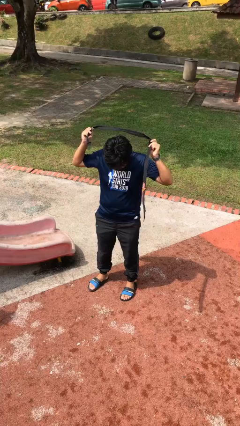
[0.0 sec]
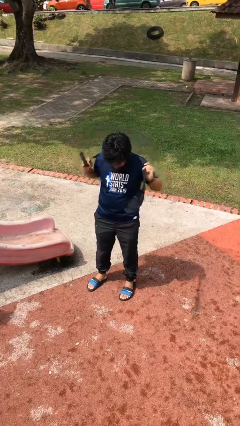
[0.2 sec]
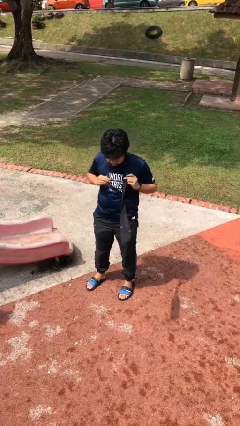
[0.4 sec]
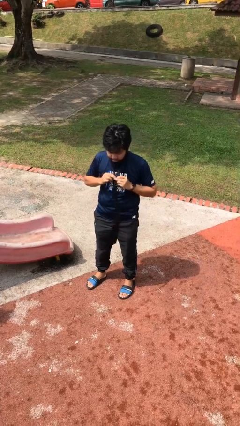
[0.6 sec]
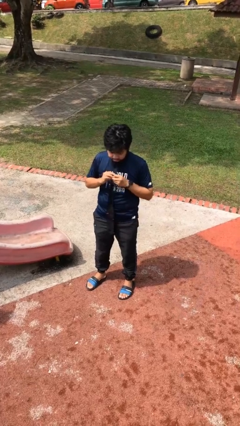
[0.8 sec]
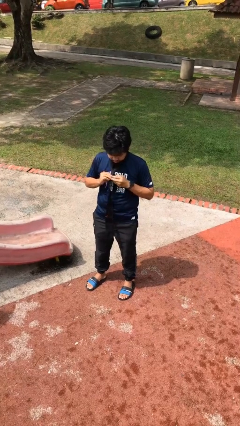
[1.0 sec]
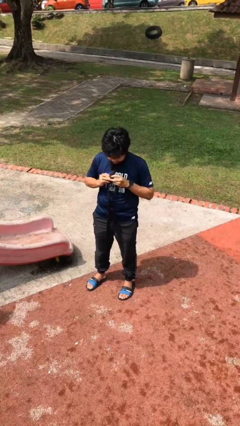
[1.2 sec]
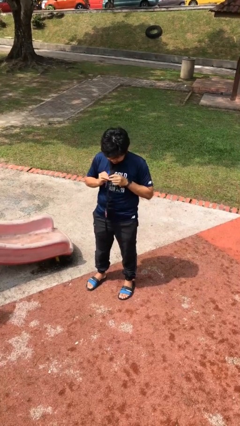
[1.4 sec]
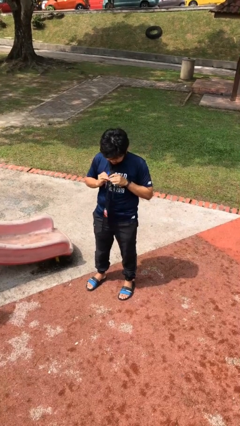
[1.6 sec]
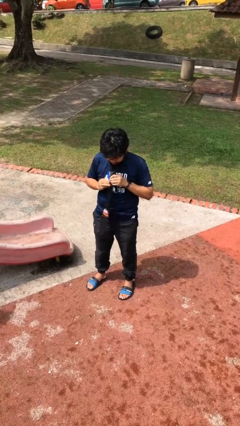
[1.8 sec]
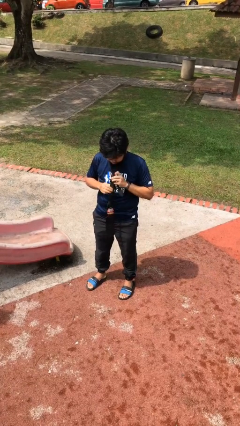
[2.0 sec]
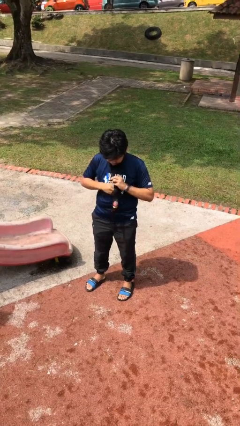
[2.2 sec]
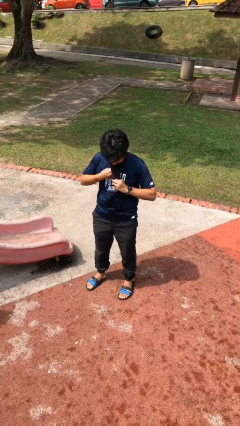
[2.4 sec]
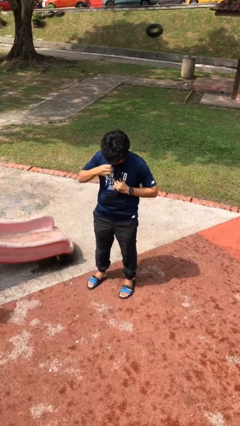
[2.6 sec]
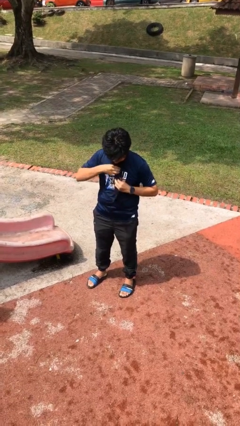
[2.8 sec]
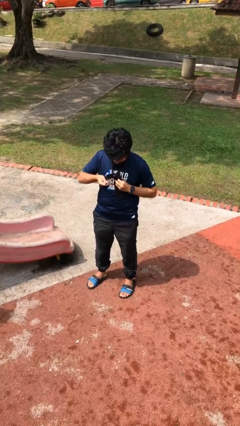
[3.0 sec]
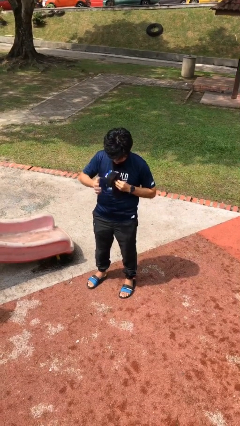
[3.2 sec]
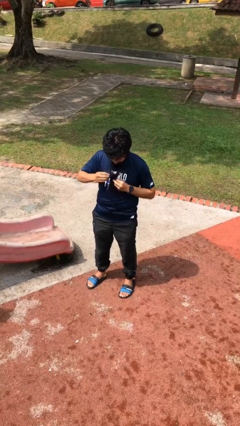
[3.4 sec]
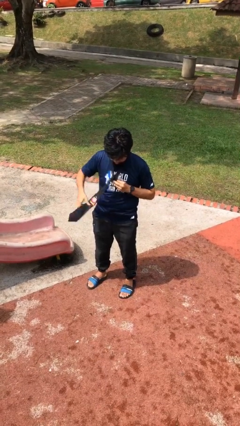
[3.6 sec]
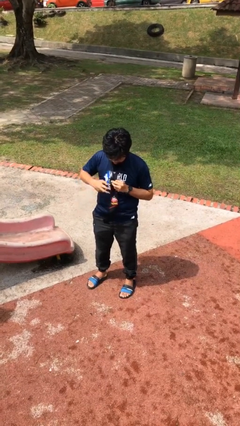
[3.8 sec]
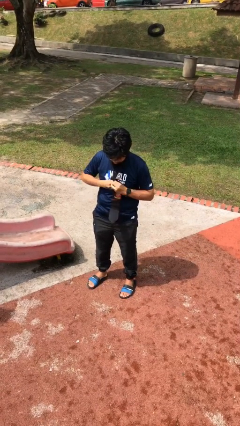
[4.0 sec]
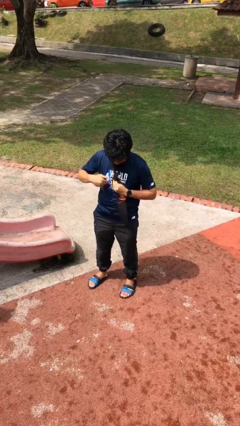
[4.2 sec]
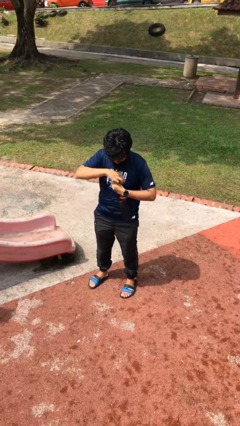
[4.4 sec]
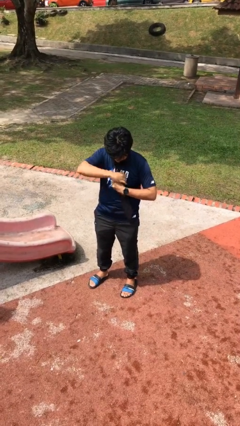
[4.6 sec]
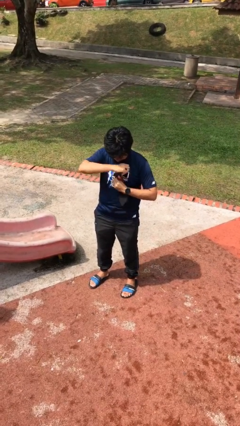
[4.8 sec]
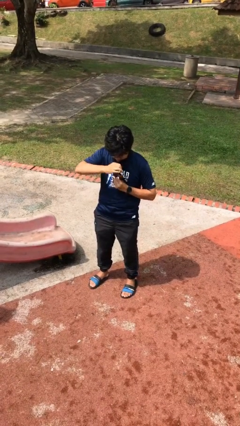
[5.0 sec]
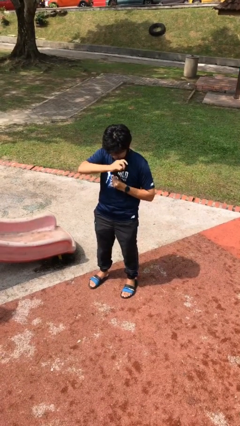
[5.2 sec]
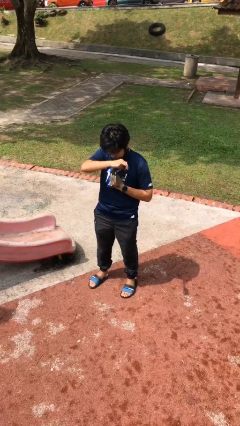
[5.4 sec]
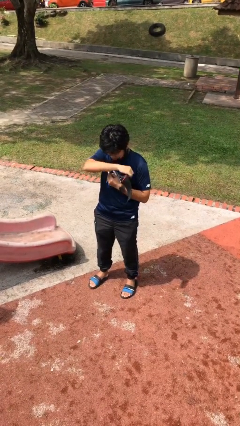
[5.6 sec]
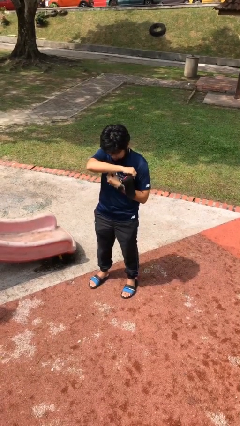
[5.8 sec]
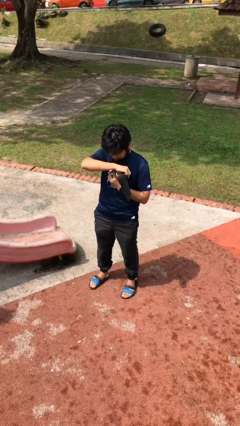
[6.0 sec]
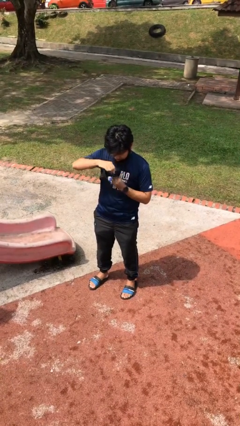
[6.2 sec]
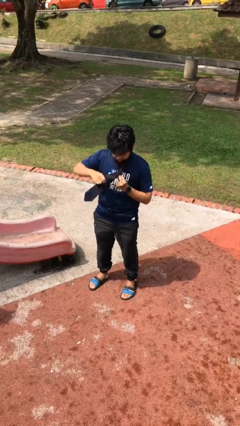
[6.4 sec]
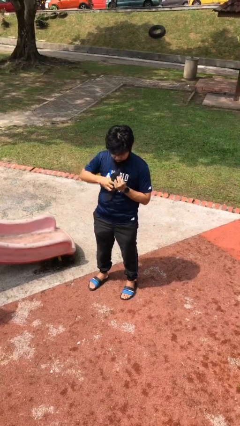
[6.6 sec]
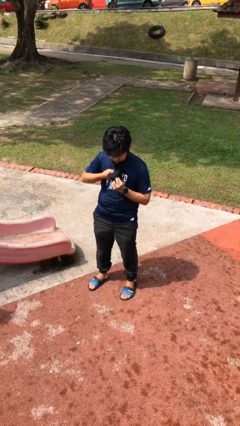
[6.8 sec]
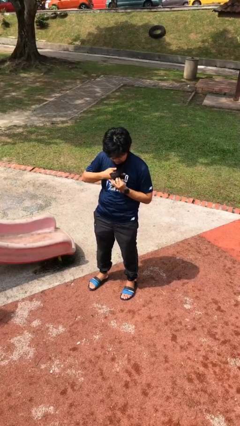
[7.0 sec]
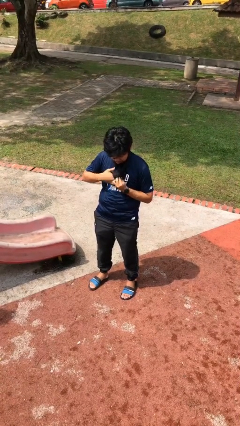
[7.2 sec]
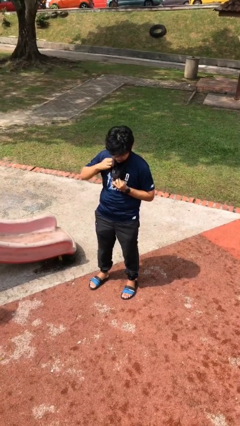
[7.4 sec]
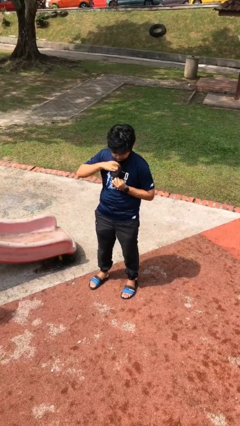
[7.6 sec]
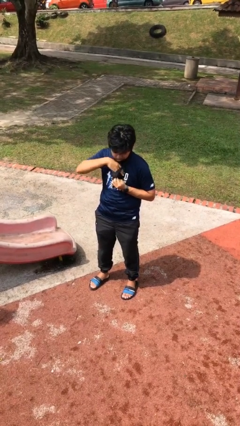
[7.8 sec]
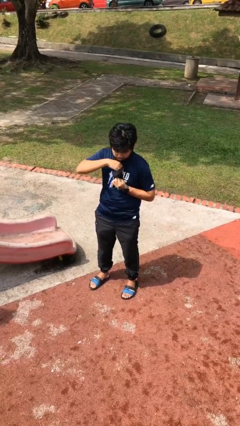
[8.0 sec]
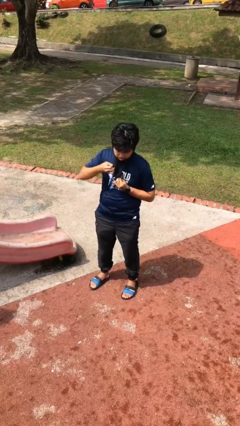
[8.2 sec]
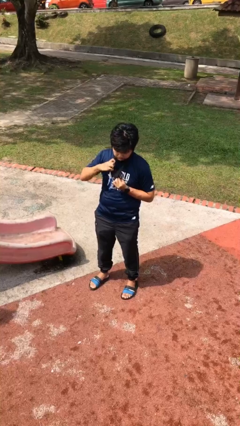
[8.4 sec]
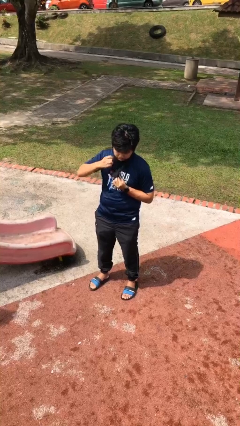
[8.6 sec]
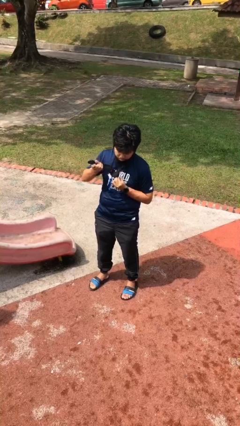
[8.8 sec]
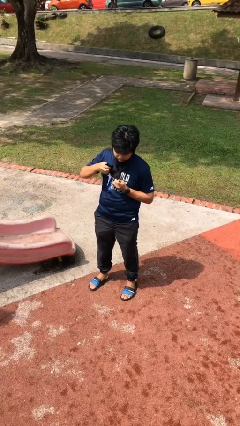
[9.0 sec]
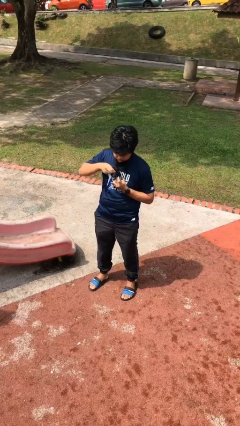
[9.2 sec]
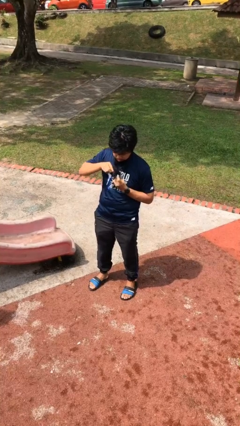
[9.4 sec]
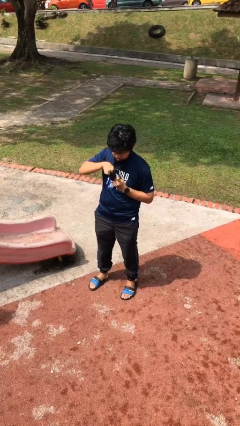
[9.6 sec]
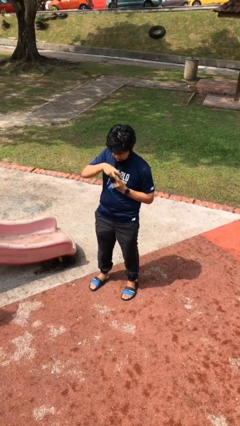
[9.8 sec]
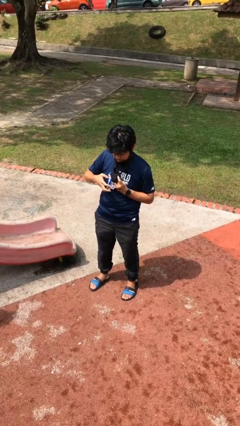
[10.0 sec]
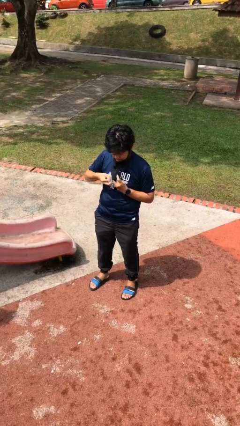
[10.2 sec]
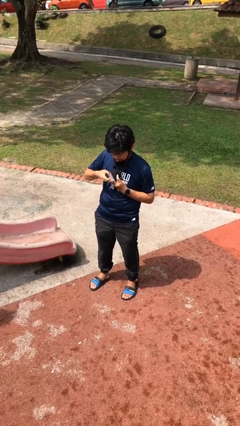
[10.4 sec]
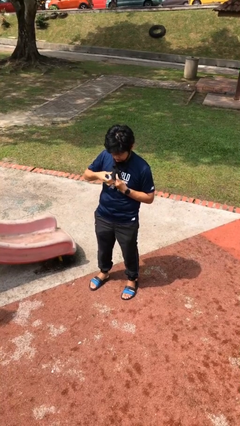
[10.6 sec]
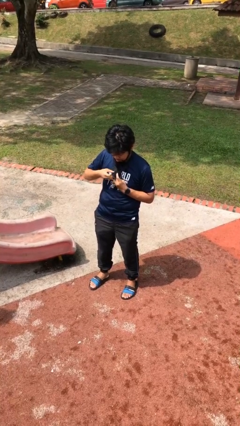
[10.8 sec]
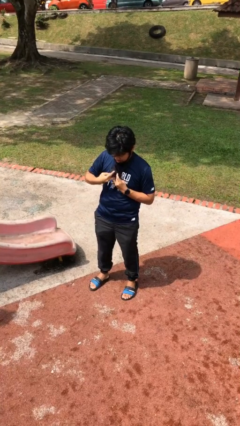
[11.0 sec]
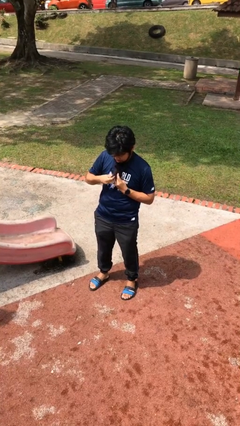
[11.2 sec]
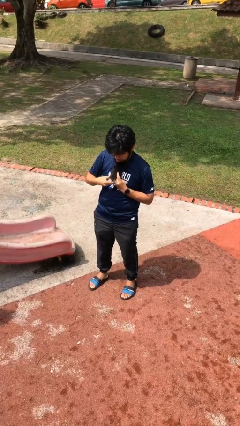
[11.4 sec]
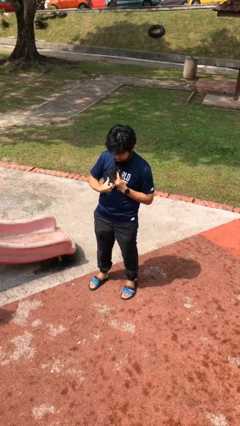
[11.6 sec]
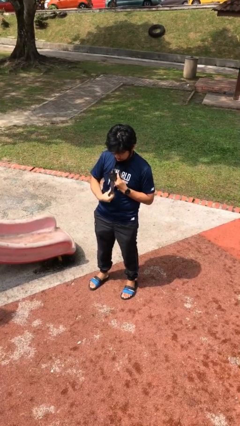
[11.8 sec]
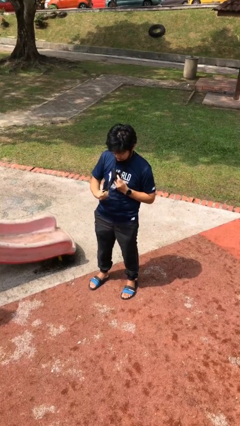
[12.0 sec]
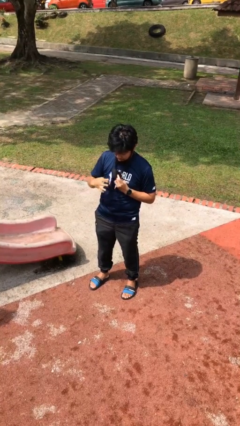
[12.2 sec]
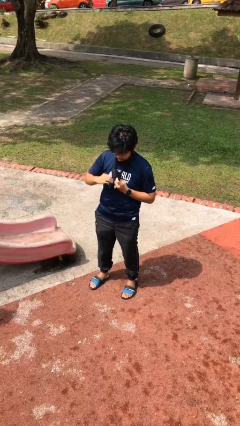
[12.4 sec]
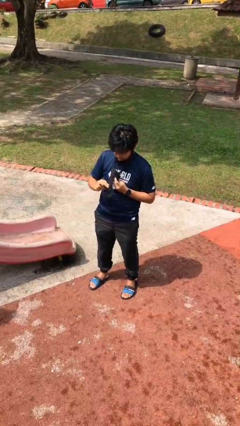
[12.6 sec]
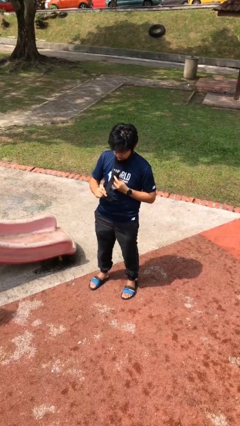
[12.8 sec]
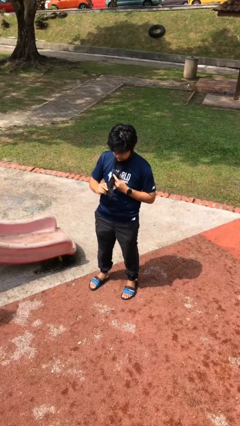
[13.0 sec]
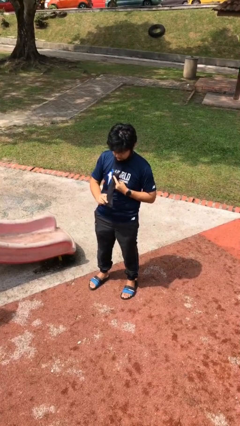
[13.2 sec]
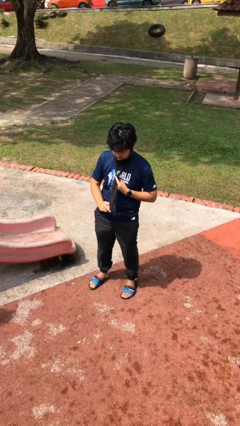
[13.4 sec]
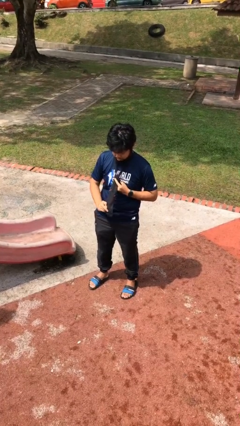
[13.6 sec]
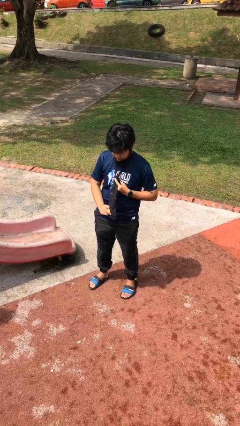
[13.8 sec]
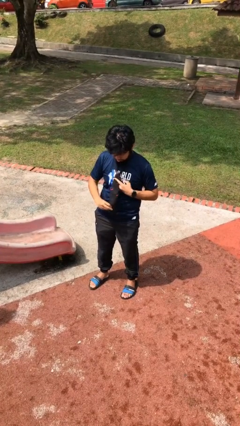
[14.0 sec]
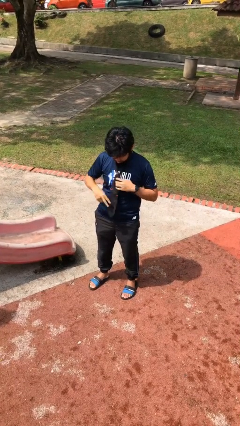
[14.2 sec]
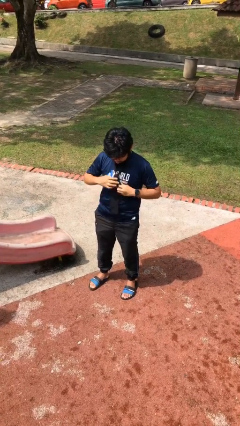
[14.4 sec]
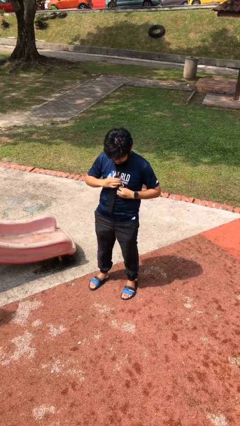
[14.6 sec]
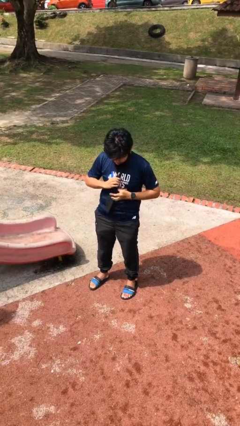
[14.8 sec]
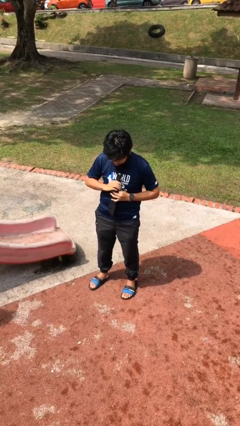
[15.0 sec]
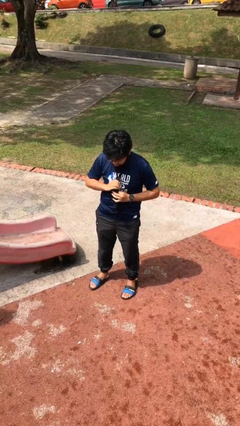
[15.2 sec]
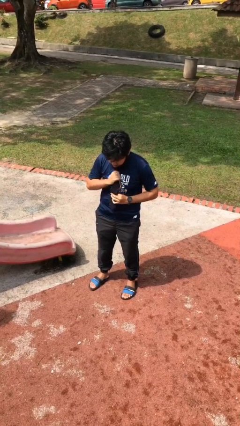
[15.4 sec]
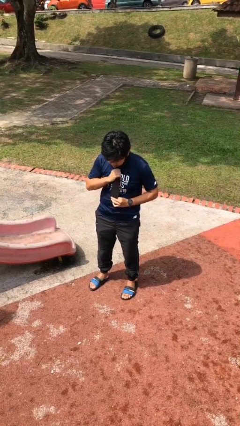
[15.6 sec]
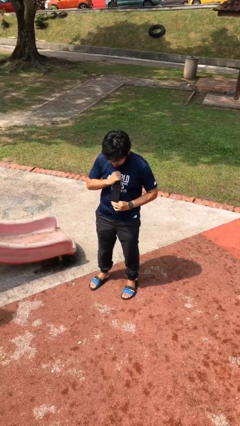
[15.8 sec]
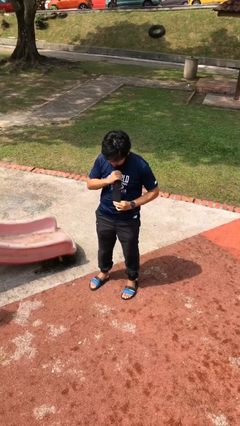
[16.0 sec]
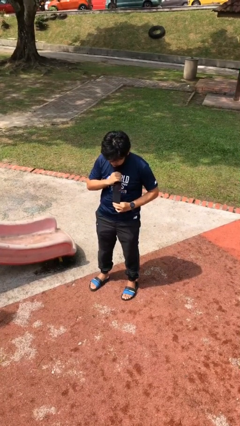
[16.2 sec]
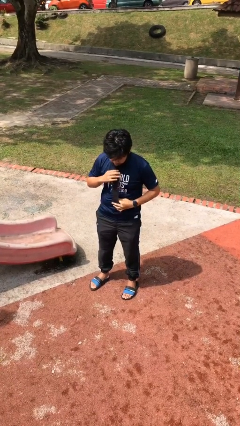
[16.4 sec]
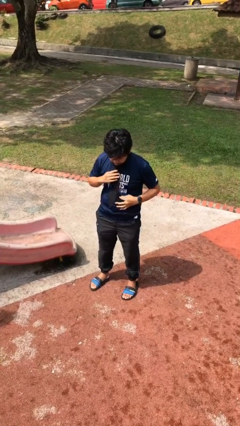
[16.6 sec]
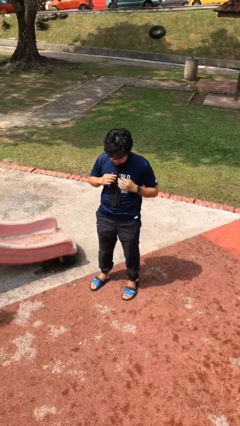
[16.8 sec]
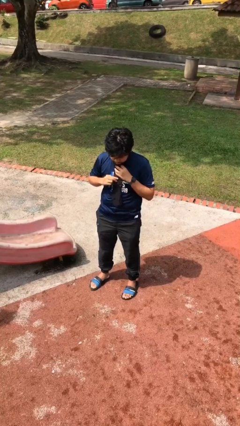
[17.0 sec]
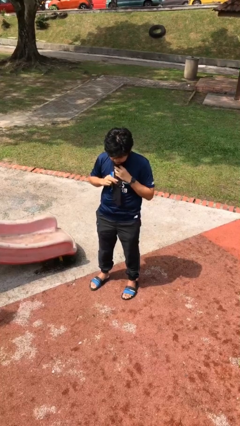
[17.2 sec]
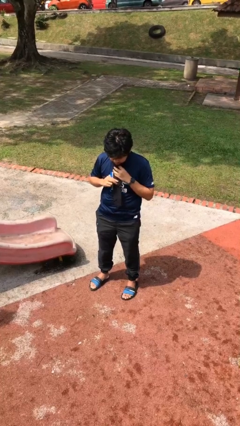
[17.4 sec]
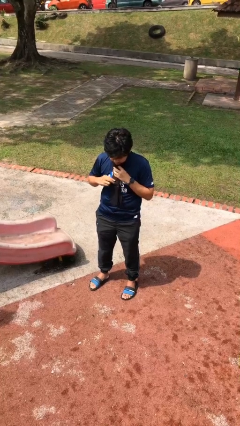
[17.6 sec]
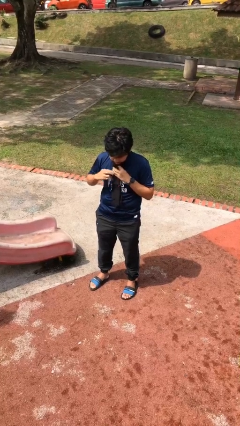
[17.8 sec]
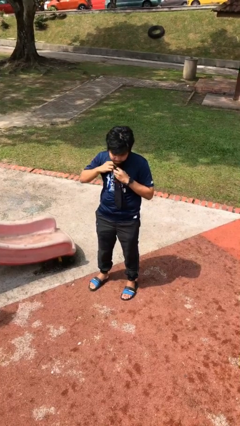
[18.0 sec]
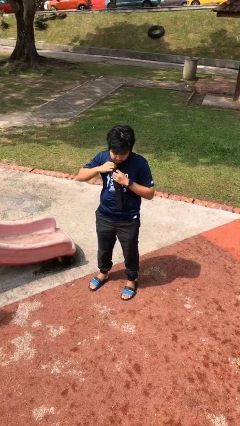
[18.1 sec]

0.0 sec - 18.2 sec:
person puts on necktie

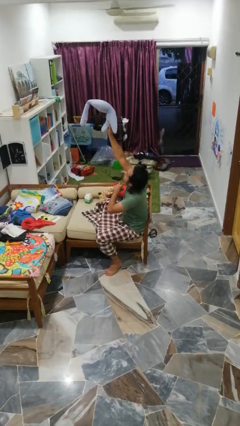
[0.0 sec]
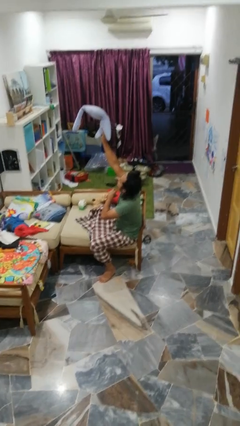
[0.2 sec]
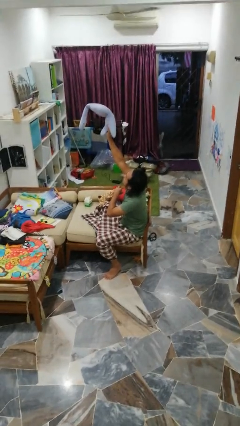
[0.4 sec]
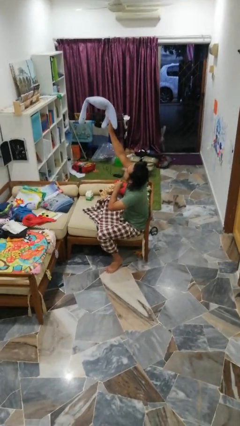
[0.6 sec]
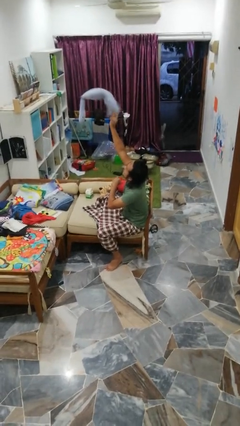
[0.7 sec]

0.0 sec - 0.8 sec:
person drops object
